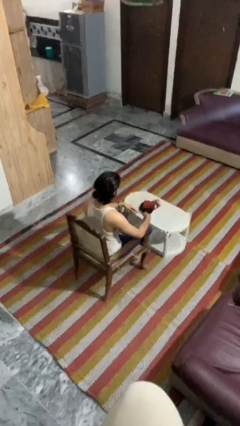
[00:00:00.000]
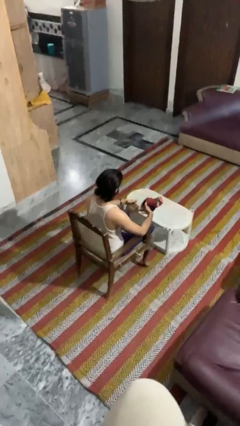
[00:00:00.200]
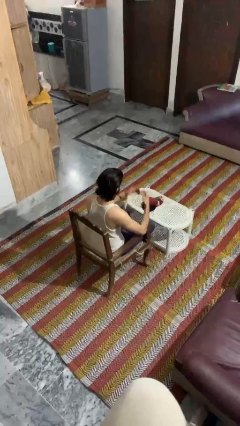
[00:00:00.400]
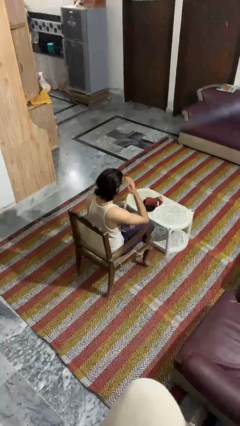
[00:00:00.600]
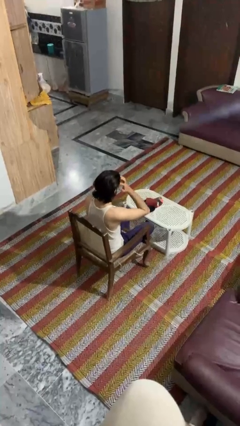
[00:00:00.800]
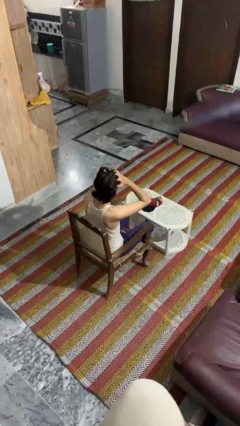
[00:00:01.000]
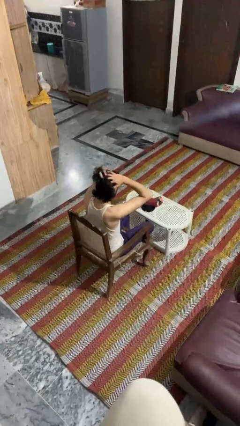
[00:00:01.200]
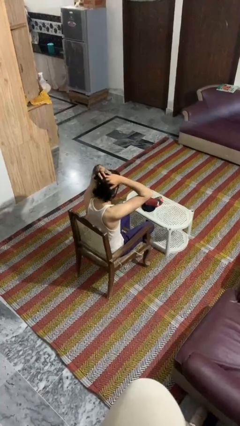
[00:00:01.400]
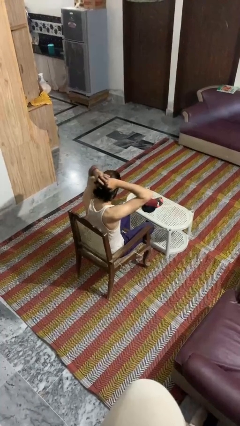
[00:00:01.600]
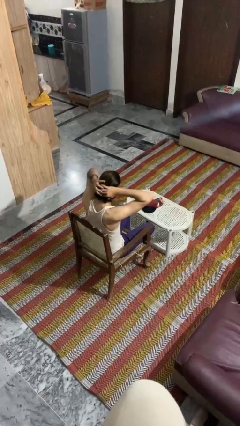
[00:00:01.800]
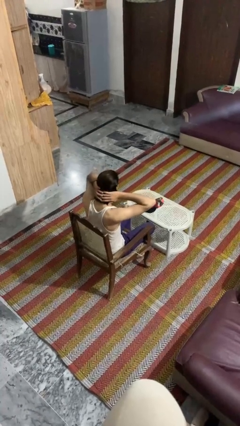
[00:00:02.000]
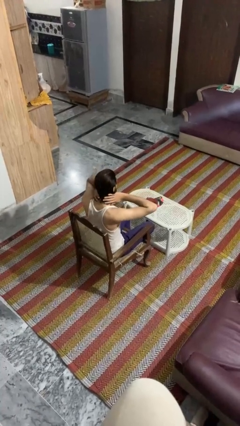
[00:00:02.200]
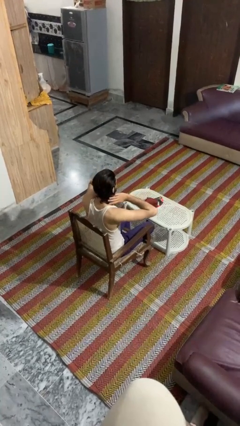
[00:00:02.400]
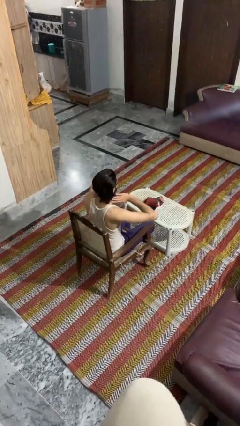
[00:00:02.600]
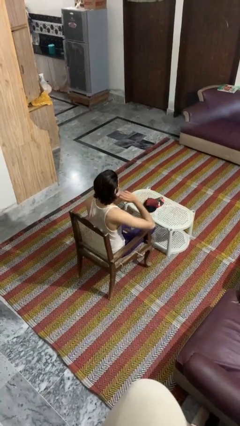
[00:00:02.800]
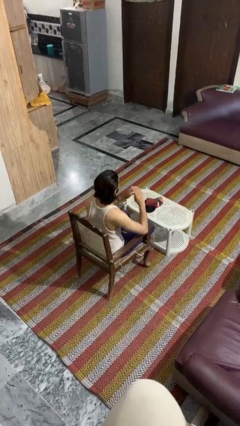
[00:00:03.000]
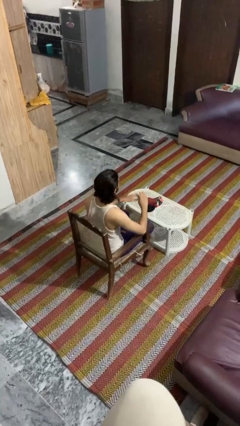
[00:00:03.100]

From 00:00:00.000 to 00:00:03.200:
person strokes hair

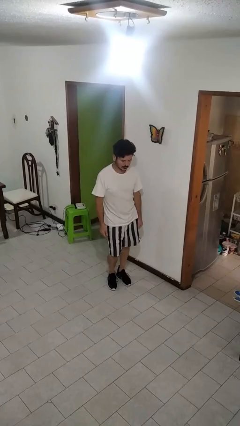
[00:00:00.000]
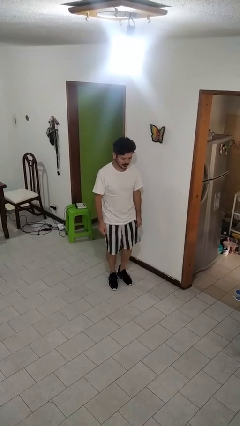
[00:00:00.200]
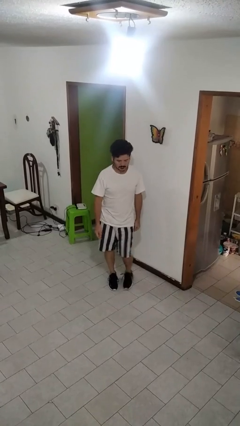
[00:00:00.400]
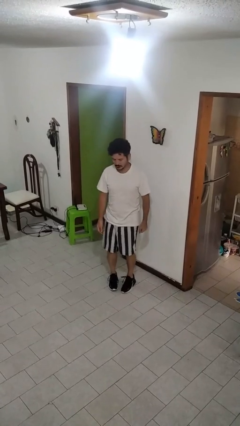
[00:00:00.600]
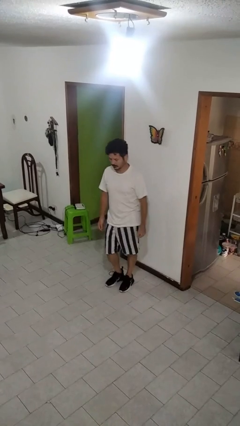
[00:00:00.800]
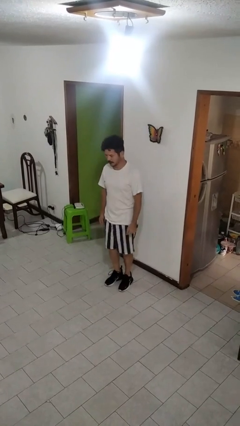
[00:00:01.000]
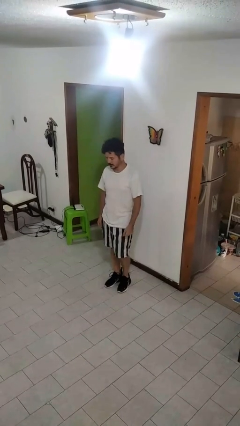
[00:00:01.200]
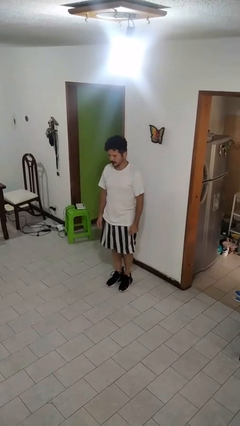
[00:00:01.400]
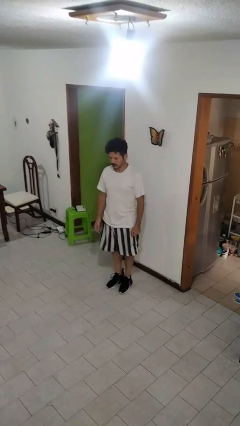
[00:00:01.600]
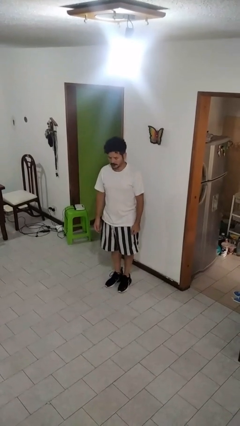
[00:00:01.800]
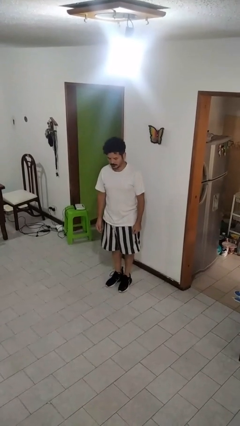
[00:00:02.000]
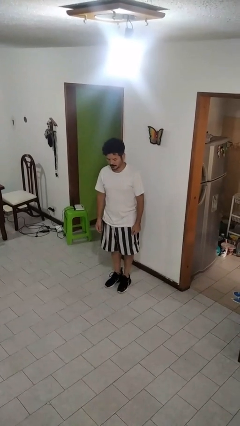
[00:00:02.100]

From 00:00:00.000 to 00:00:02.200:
person dances in place

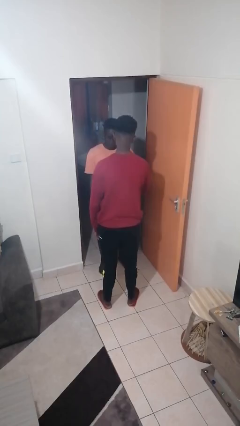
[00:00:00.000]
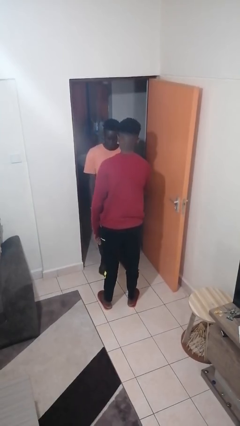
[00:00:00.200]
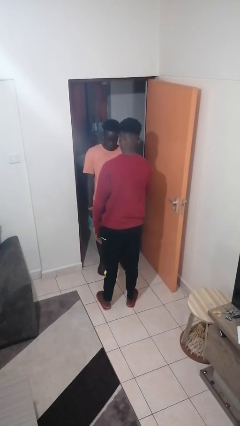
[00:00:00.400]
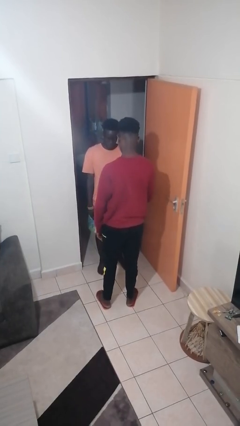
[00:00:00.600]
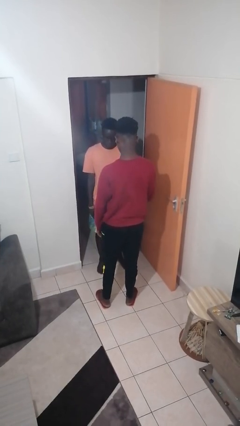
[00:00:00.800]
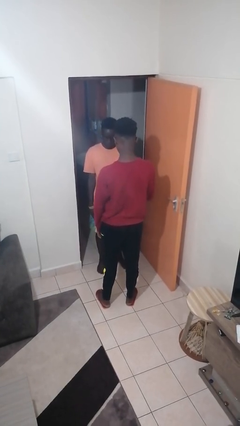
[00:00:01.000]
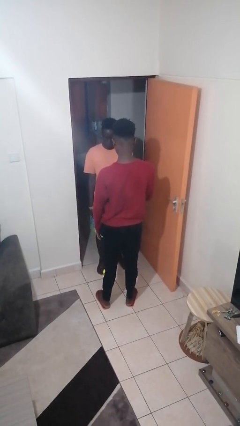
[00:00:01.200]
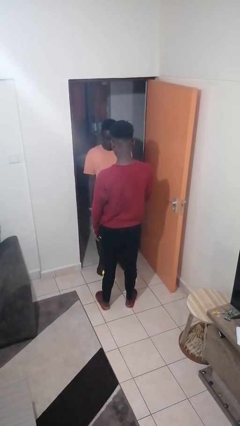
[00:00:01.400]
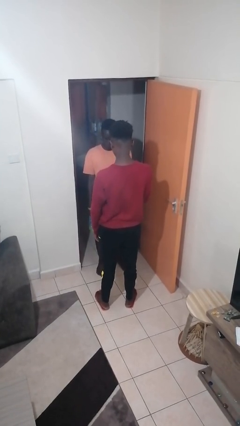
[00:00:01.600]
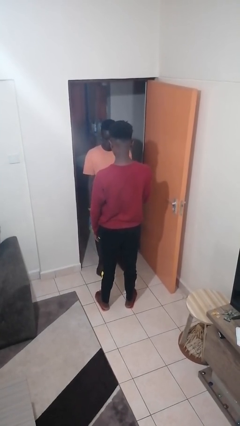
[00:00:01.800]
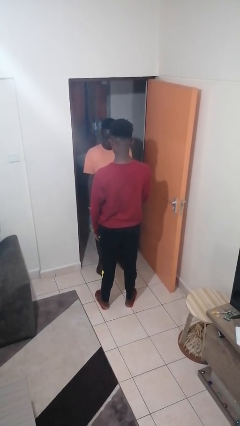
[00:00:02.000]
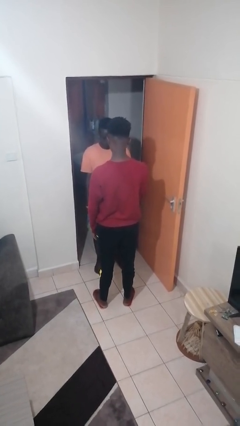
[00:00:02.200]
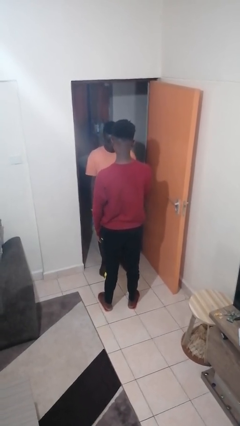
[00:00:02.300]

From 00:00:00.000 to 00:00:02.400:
person grabs person by forearm

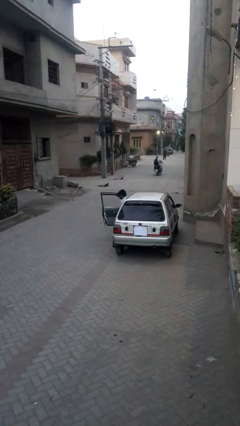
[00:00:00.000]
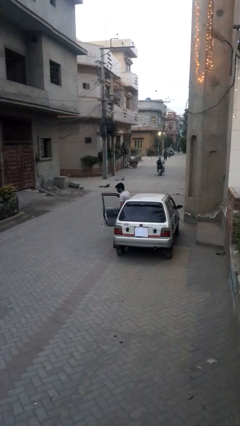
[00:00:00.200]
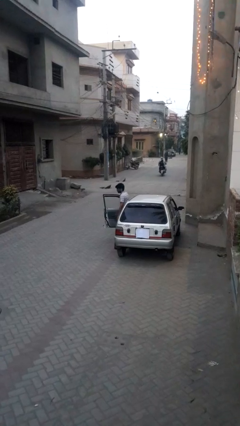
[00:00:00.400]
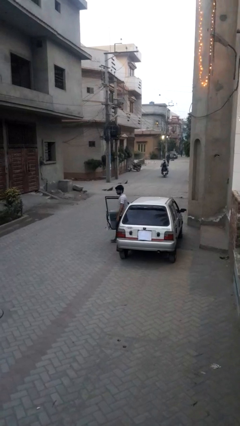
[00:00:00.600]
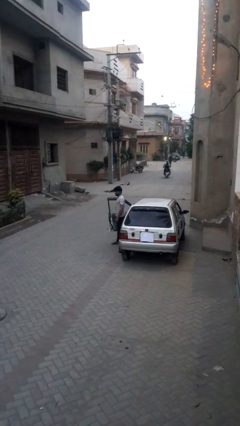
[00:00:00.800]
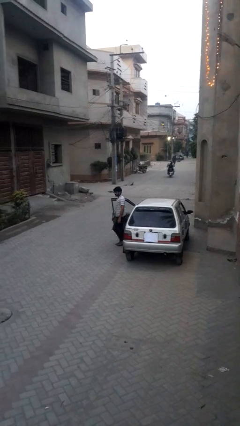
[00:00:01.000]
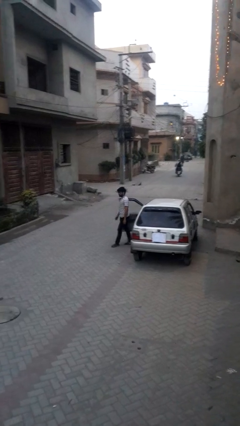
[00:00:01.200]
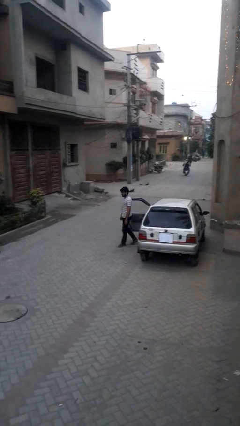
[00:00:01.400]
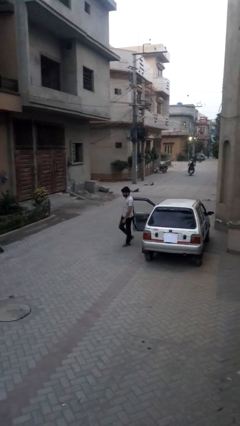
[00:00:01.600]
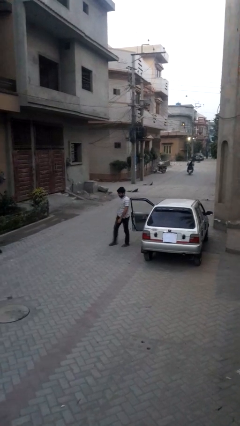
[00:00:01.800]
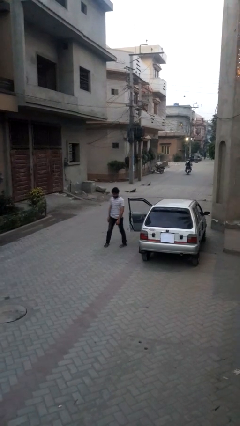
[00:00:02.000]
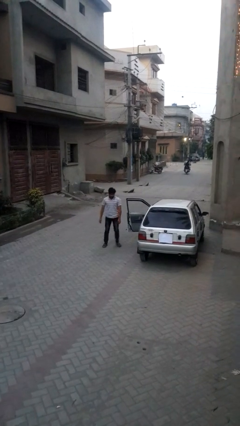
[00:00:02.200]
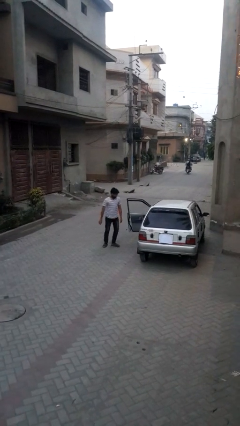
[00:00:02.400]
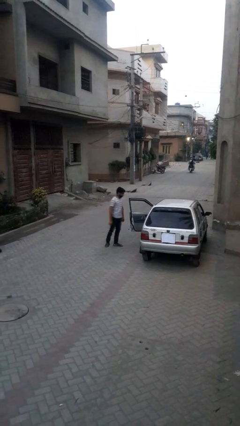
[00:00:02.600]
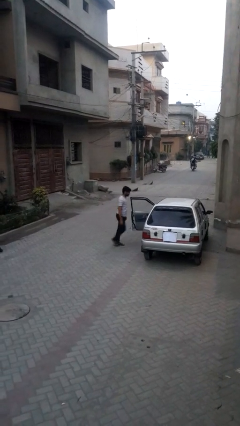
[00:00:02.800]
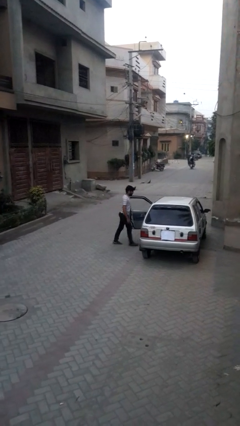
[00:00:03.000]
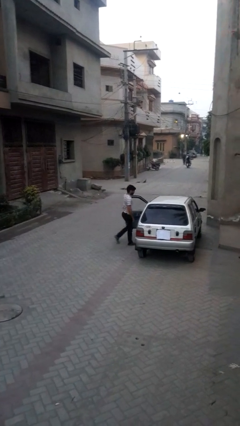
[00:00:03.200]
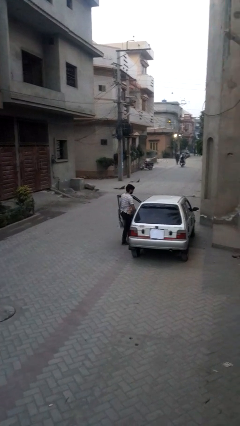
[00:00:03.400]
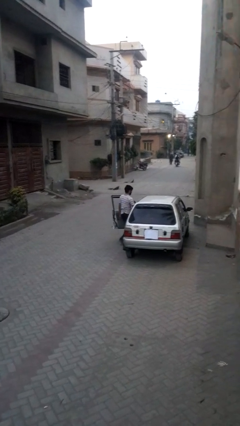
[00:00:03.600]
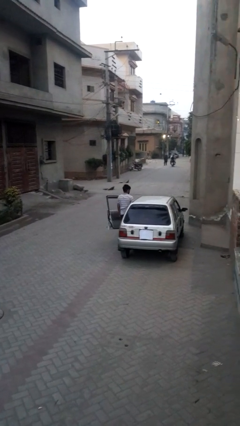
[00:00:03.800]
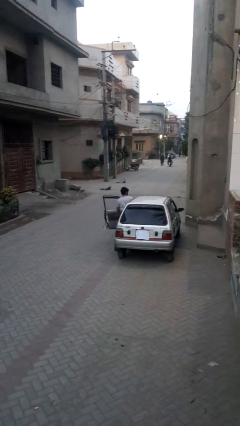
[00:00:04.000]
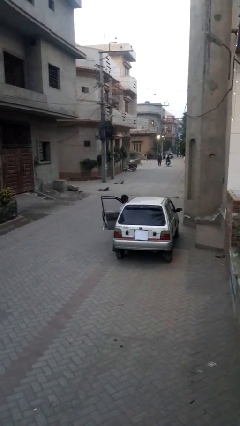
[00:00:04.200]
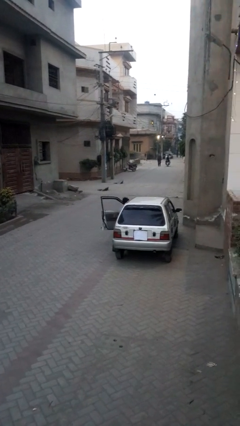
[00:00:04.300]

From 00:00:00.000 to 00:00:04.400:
person exits car

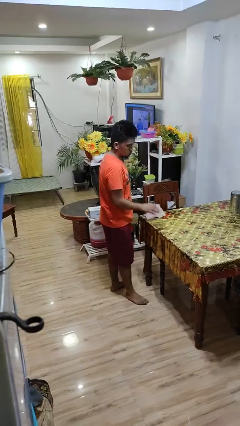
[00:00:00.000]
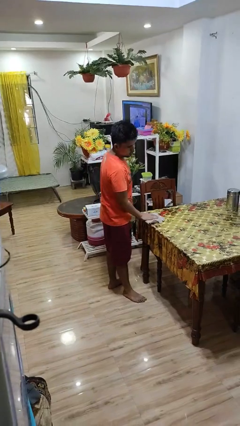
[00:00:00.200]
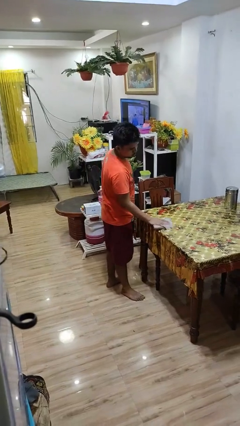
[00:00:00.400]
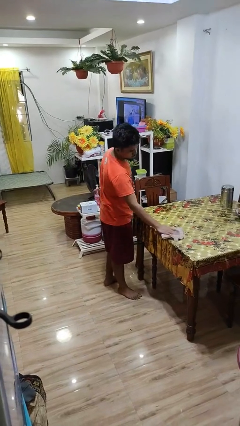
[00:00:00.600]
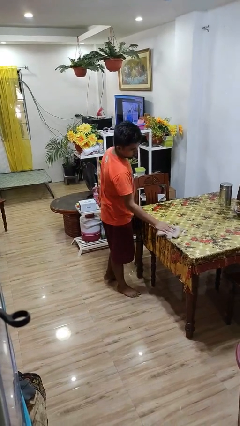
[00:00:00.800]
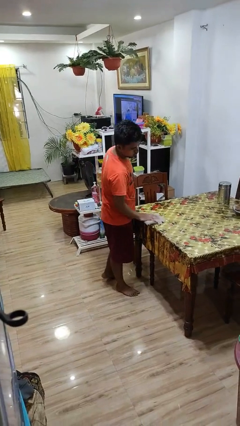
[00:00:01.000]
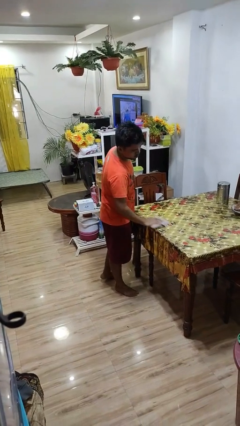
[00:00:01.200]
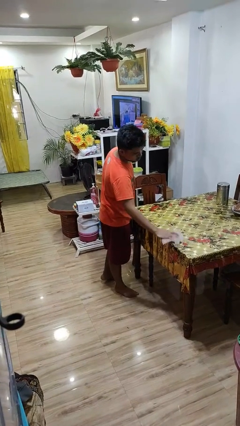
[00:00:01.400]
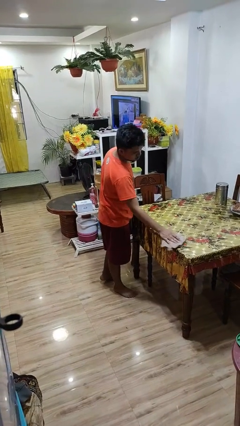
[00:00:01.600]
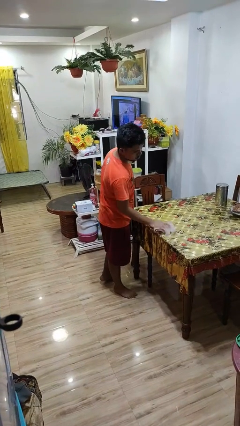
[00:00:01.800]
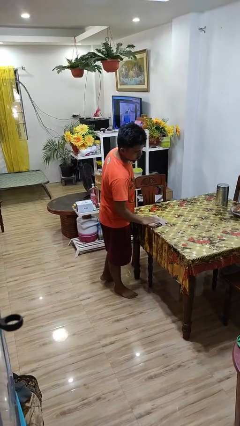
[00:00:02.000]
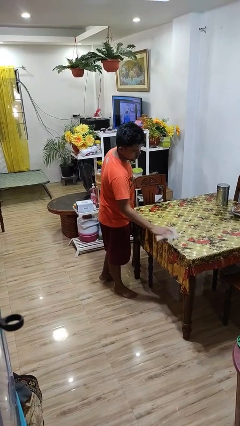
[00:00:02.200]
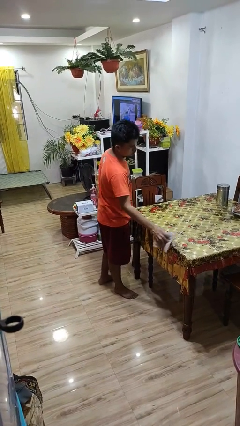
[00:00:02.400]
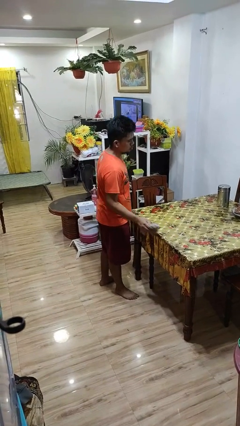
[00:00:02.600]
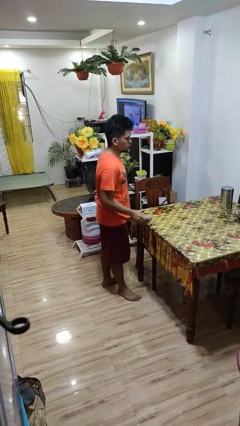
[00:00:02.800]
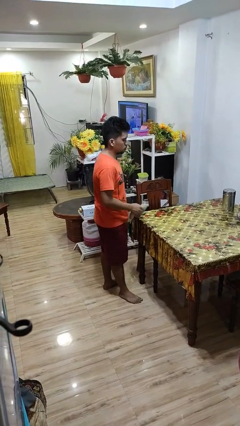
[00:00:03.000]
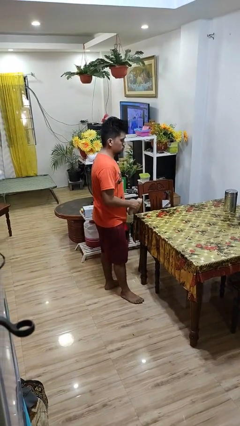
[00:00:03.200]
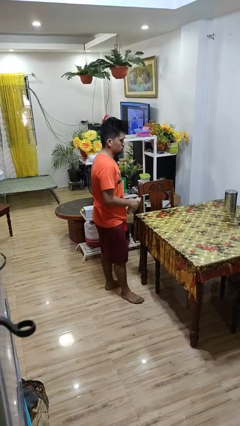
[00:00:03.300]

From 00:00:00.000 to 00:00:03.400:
person cleans table with rag

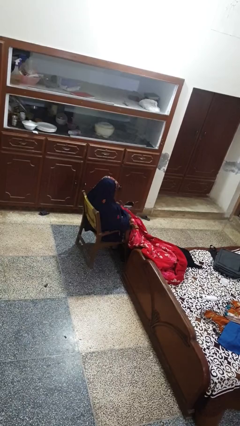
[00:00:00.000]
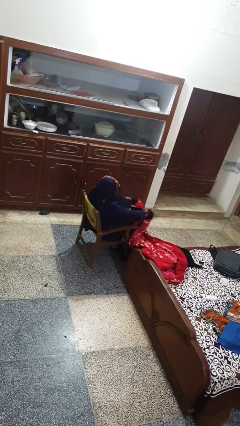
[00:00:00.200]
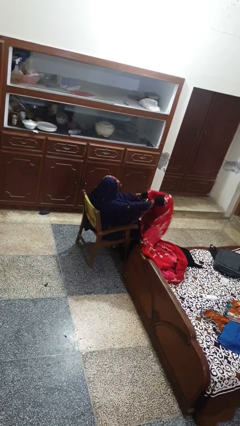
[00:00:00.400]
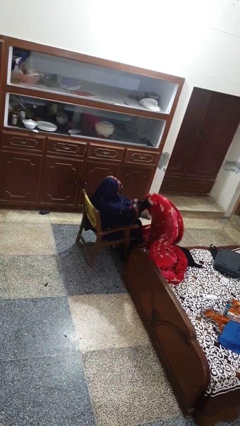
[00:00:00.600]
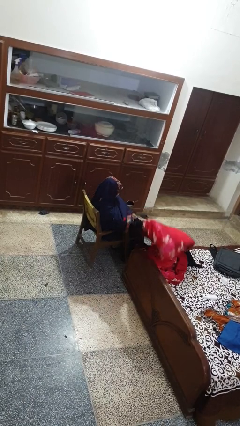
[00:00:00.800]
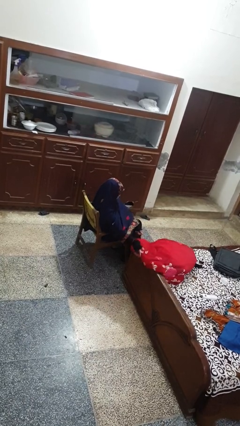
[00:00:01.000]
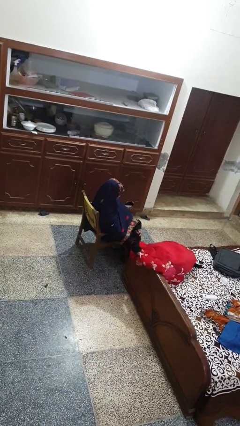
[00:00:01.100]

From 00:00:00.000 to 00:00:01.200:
person uncovers with blanket
